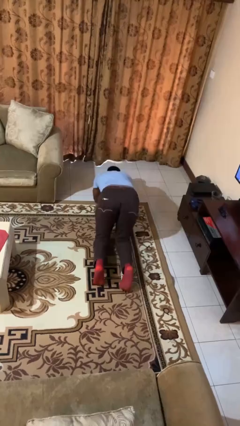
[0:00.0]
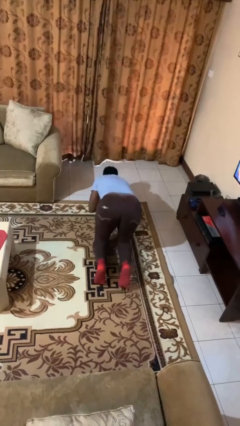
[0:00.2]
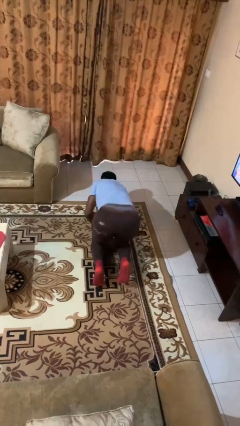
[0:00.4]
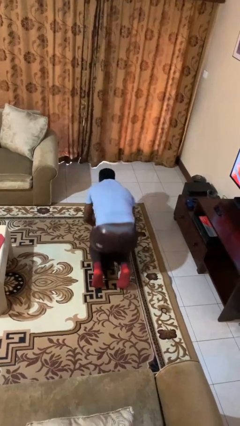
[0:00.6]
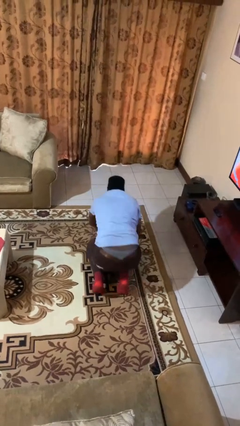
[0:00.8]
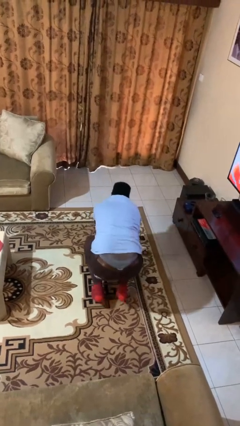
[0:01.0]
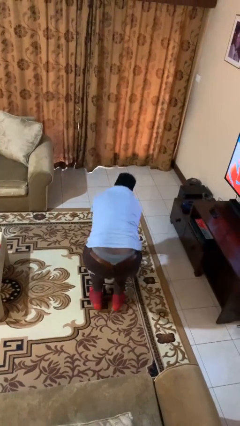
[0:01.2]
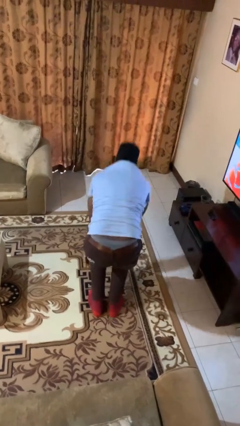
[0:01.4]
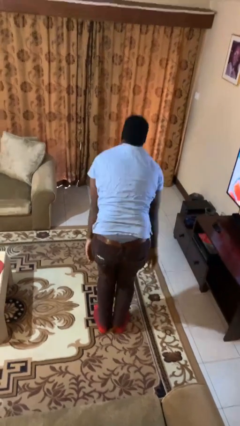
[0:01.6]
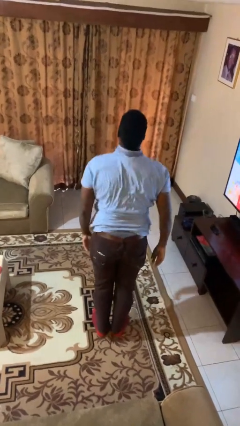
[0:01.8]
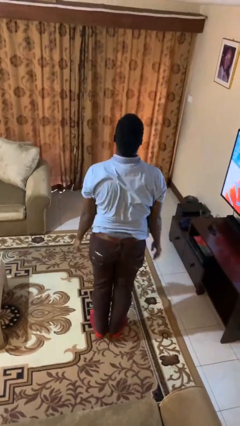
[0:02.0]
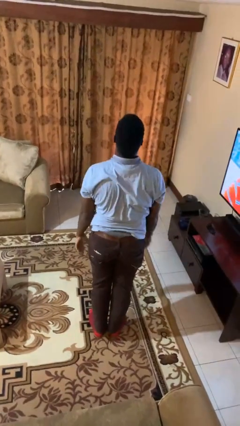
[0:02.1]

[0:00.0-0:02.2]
person stands up from floor

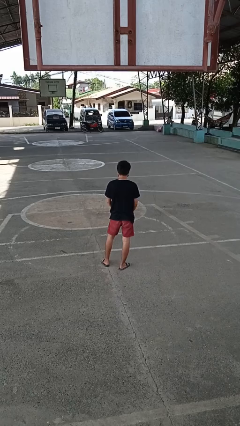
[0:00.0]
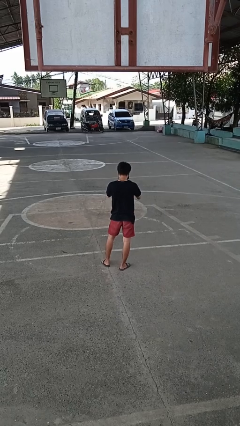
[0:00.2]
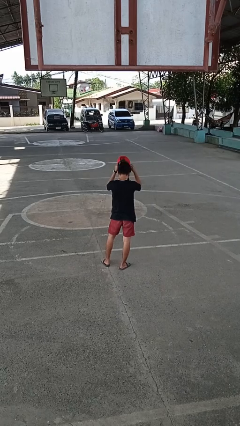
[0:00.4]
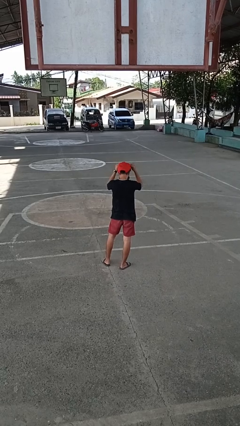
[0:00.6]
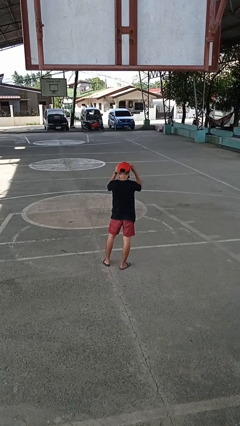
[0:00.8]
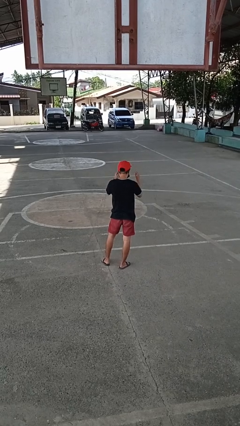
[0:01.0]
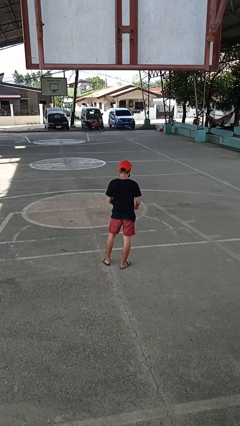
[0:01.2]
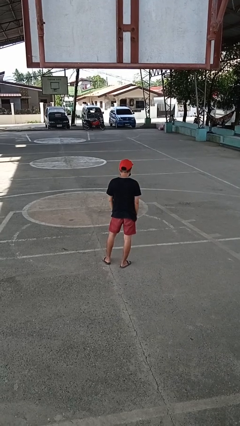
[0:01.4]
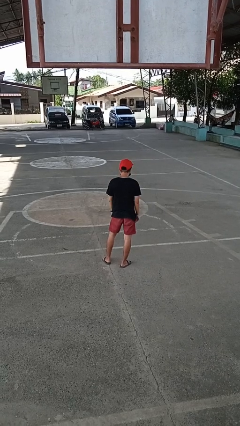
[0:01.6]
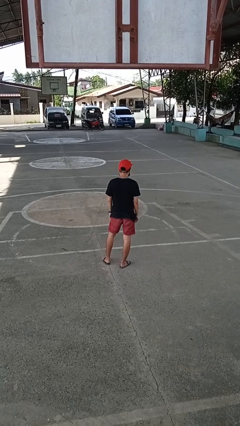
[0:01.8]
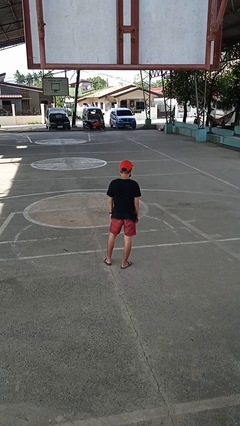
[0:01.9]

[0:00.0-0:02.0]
person puts on hat

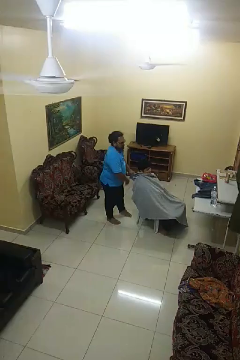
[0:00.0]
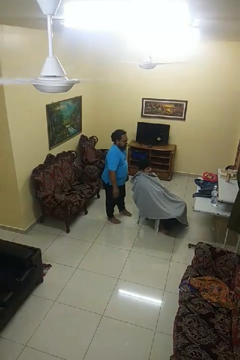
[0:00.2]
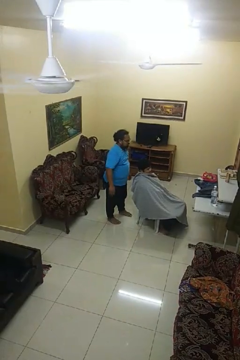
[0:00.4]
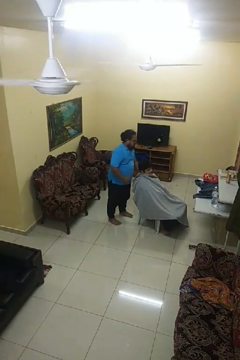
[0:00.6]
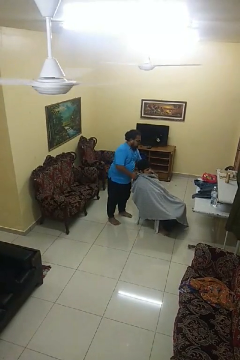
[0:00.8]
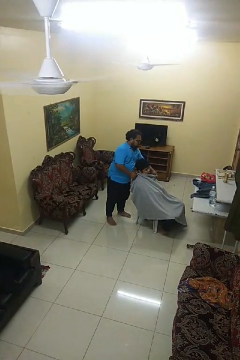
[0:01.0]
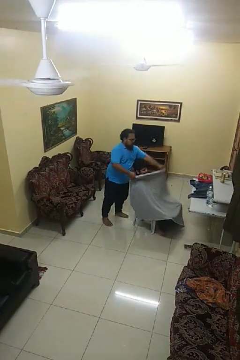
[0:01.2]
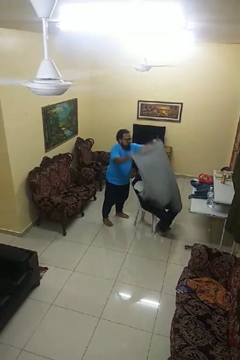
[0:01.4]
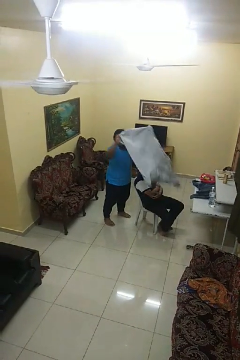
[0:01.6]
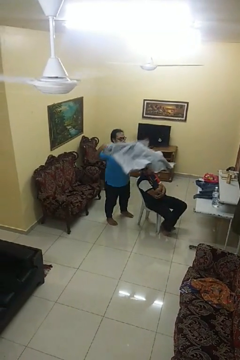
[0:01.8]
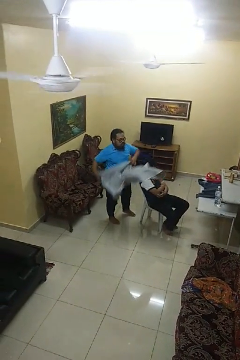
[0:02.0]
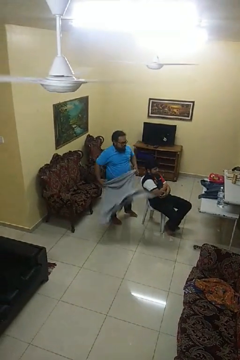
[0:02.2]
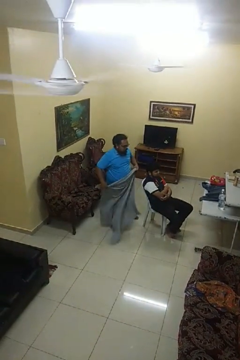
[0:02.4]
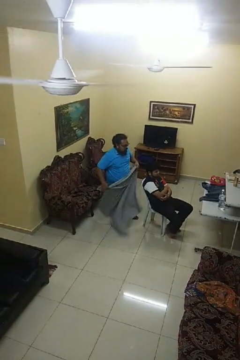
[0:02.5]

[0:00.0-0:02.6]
person uncovers friend with blanket

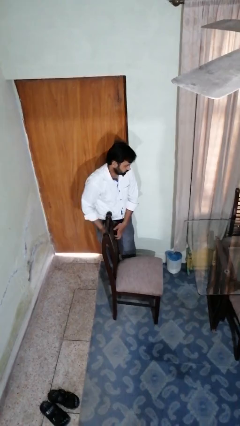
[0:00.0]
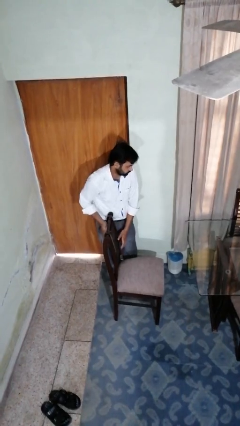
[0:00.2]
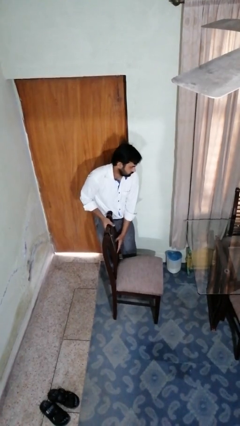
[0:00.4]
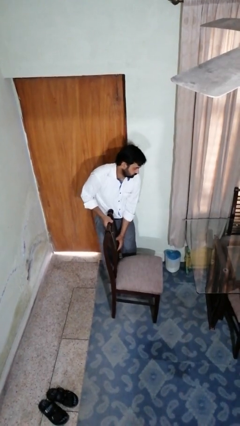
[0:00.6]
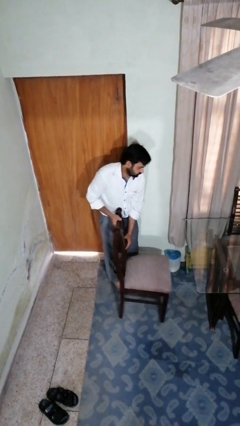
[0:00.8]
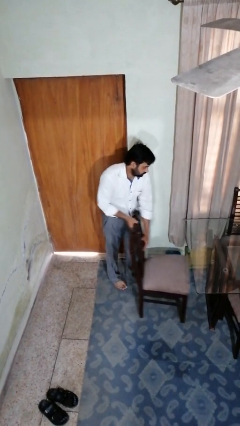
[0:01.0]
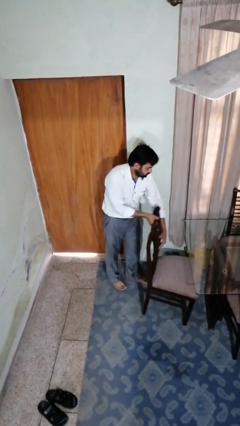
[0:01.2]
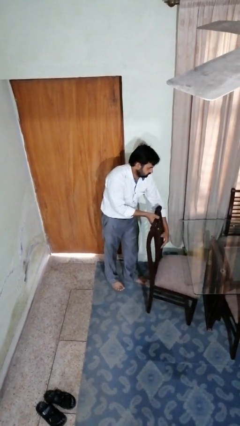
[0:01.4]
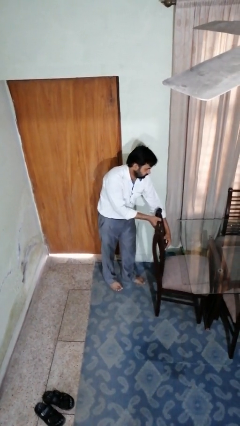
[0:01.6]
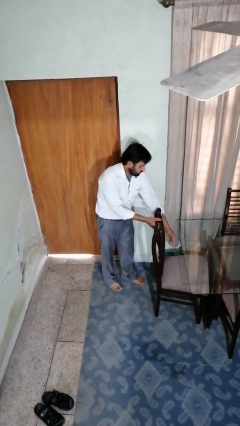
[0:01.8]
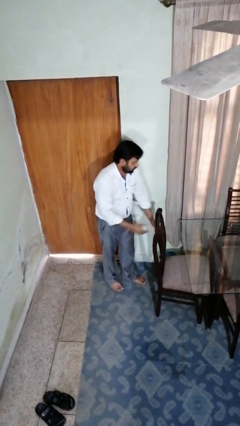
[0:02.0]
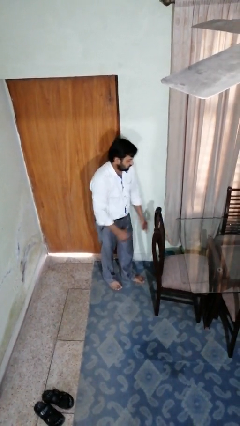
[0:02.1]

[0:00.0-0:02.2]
person pushes in chair

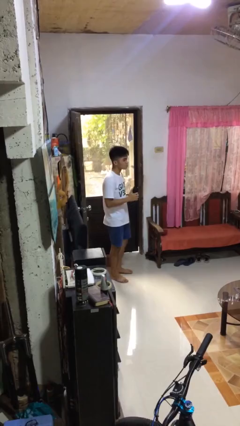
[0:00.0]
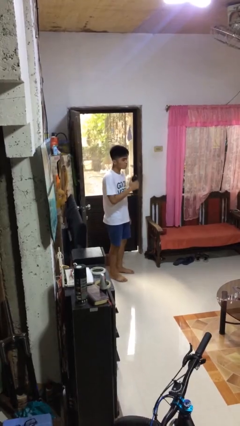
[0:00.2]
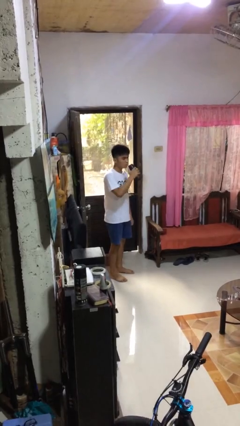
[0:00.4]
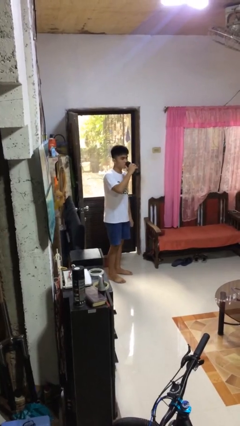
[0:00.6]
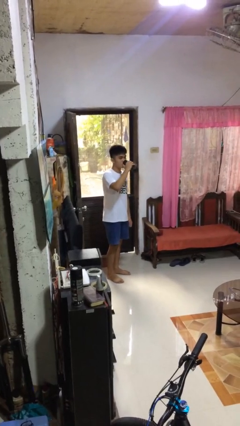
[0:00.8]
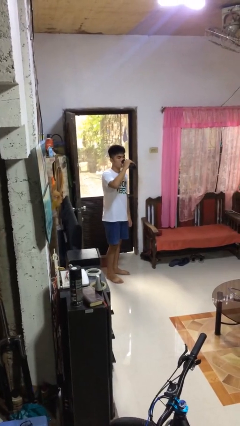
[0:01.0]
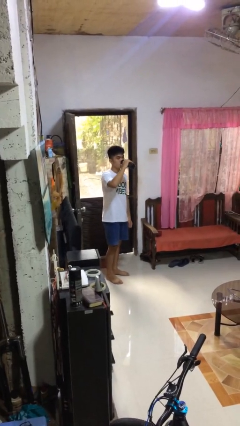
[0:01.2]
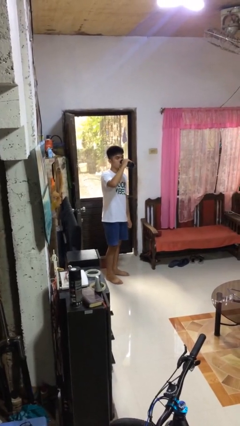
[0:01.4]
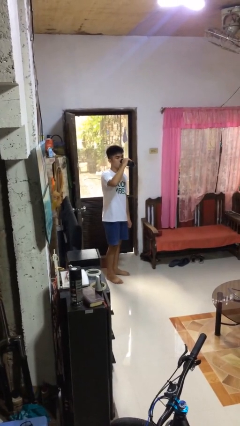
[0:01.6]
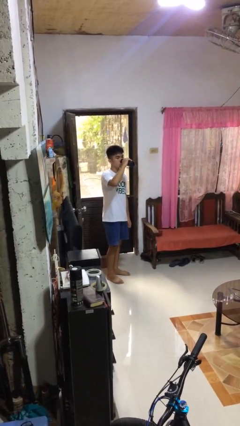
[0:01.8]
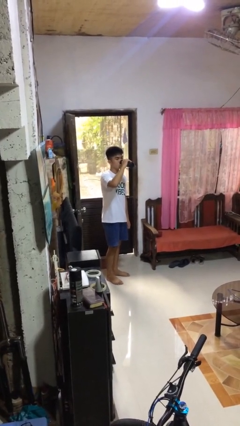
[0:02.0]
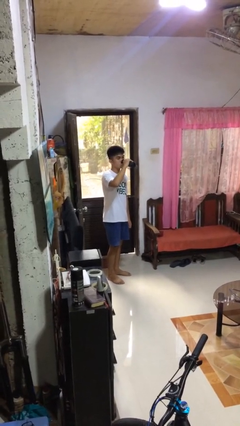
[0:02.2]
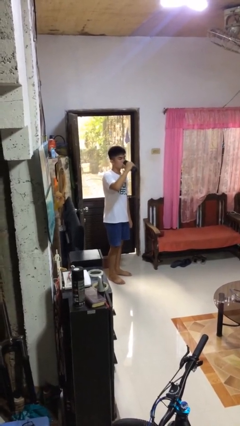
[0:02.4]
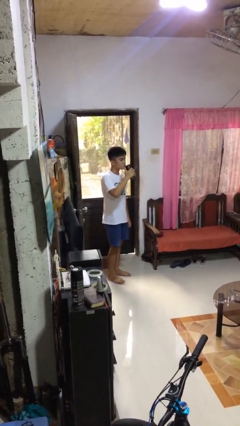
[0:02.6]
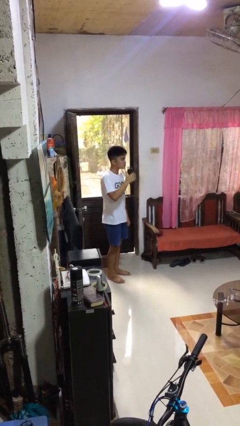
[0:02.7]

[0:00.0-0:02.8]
person drinks from bottle

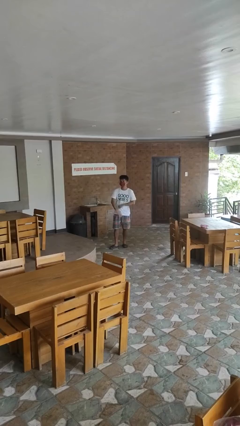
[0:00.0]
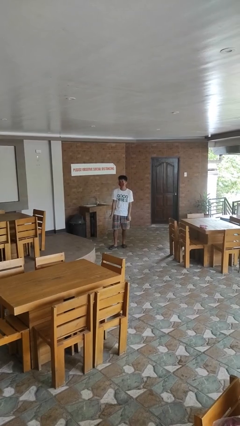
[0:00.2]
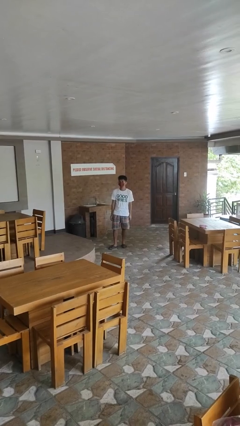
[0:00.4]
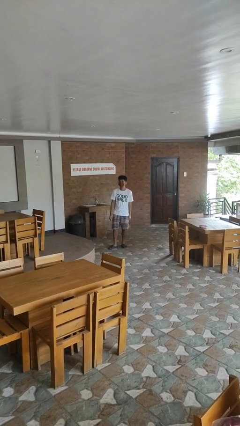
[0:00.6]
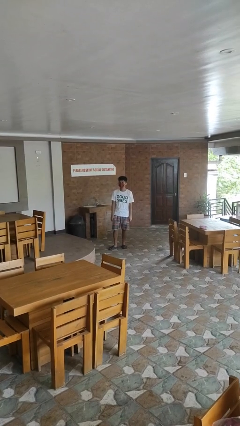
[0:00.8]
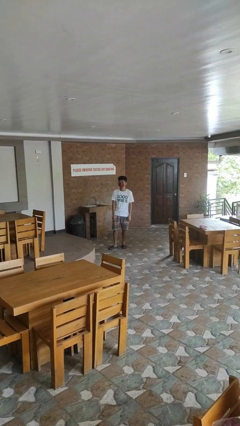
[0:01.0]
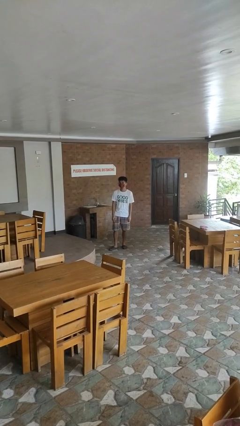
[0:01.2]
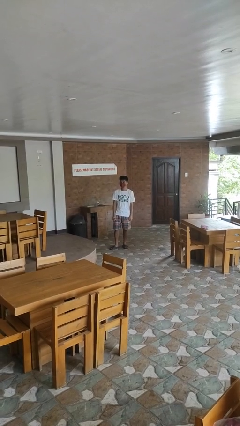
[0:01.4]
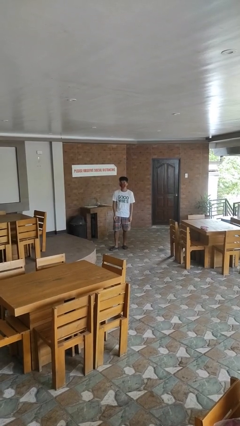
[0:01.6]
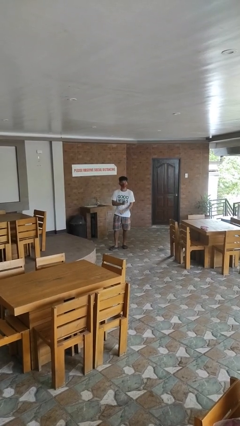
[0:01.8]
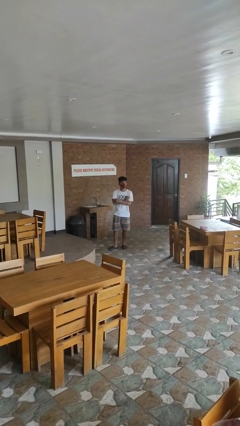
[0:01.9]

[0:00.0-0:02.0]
person brushes teeth

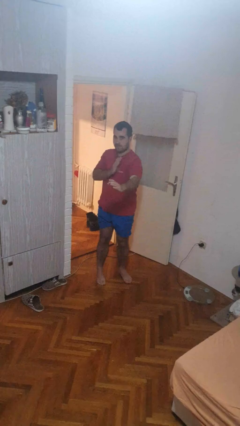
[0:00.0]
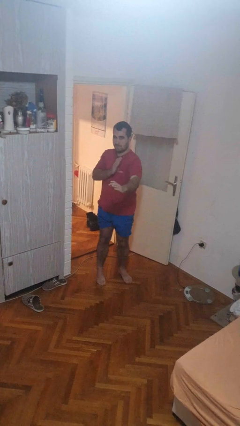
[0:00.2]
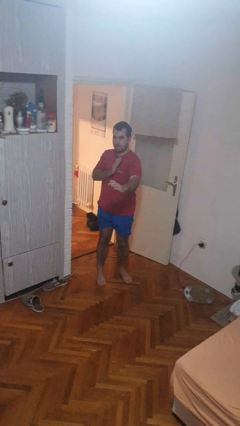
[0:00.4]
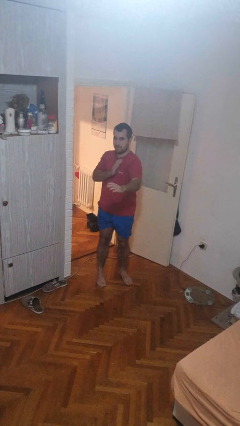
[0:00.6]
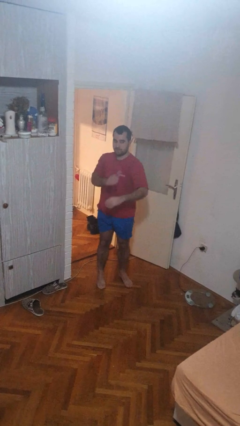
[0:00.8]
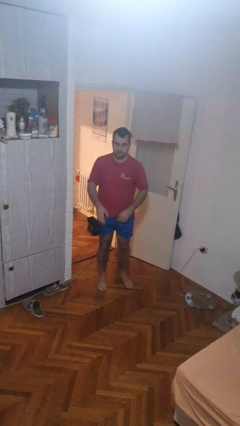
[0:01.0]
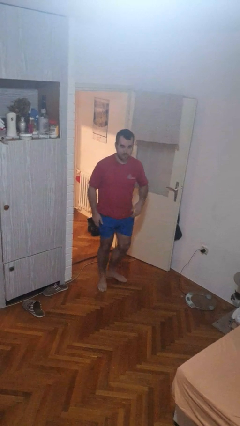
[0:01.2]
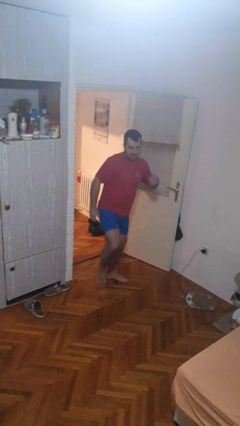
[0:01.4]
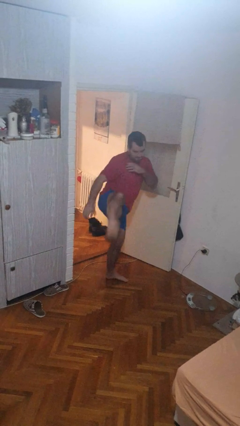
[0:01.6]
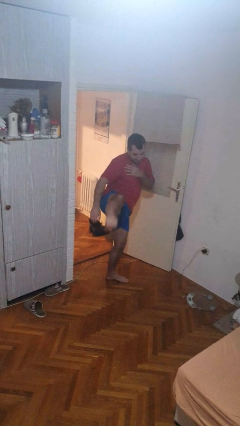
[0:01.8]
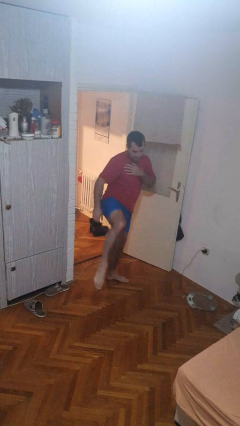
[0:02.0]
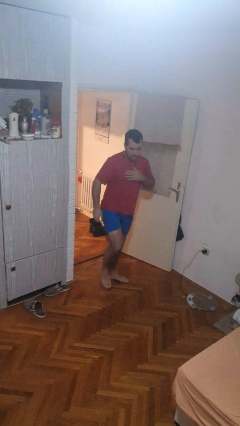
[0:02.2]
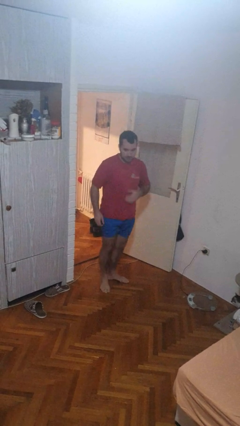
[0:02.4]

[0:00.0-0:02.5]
person karate kicks

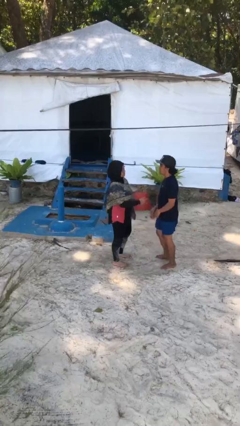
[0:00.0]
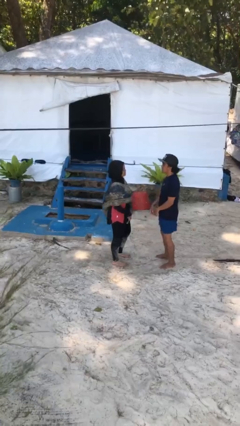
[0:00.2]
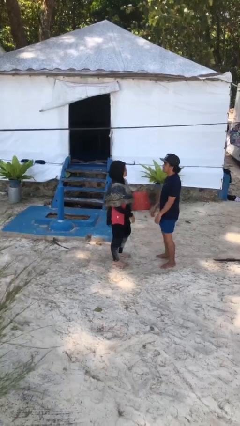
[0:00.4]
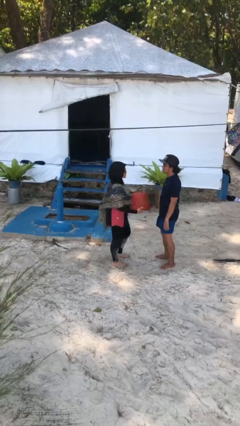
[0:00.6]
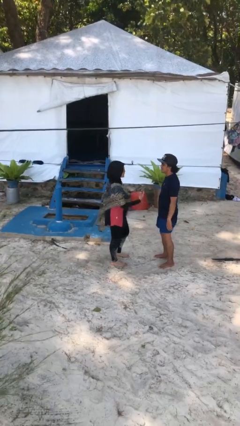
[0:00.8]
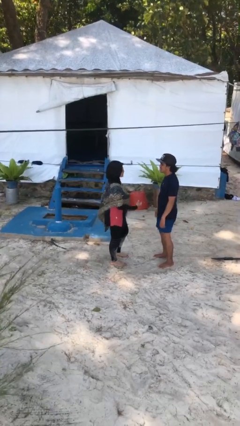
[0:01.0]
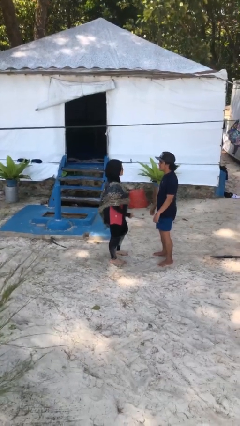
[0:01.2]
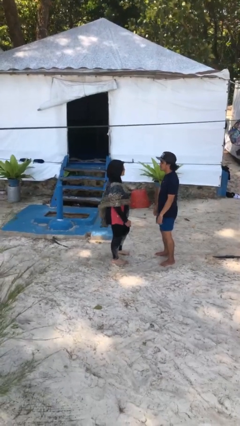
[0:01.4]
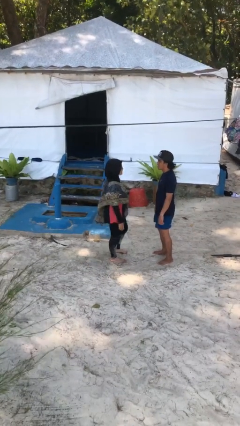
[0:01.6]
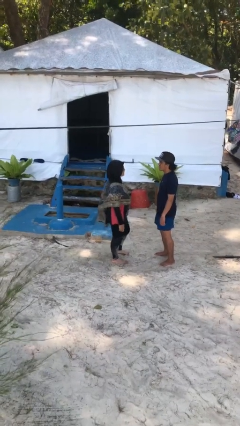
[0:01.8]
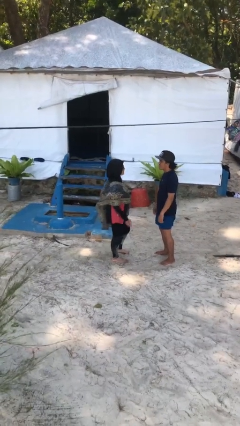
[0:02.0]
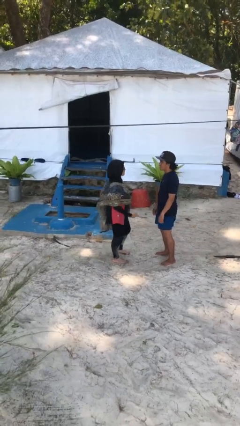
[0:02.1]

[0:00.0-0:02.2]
person talks to person
